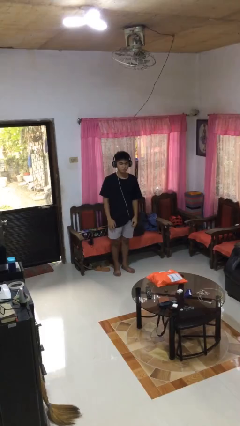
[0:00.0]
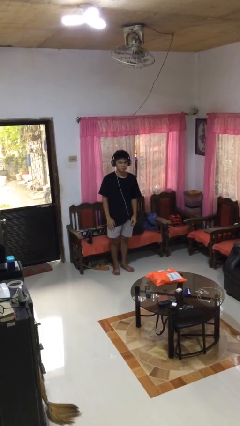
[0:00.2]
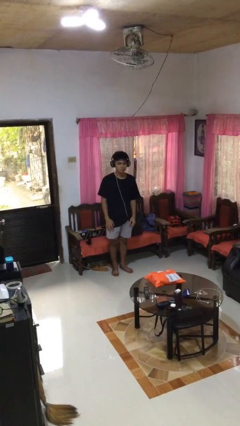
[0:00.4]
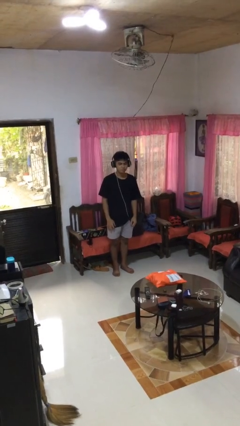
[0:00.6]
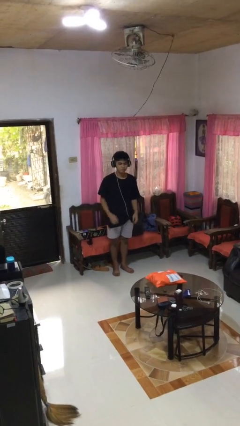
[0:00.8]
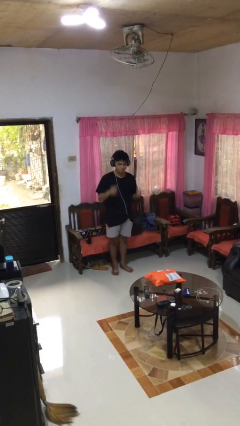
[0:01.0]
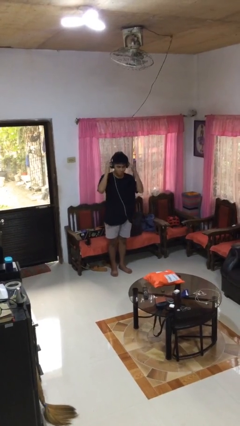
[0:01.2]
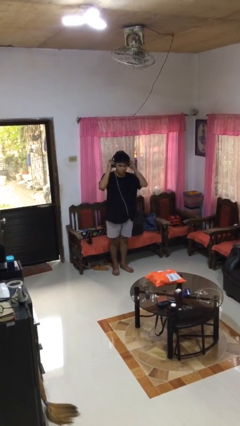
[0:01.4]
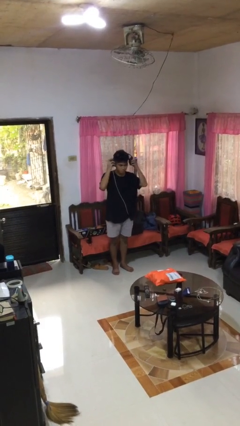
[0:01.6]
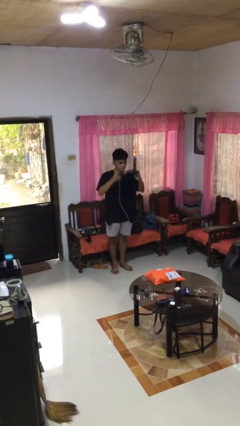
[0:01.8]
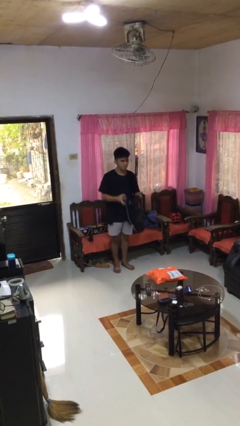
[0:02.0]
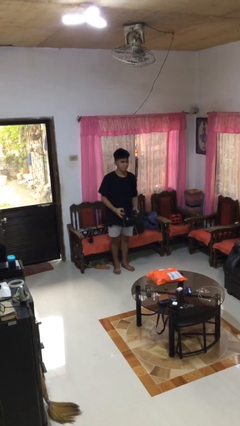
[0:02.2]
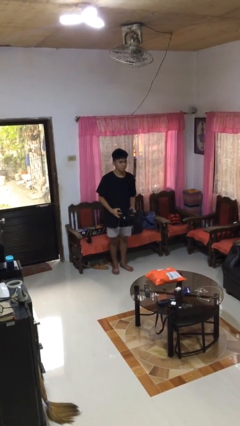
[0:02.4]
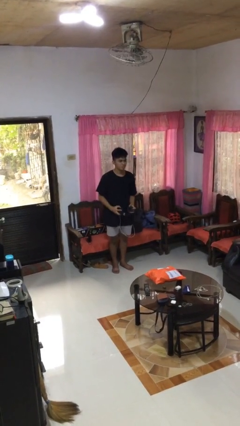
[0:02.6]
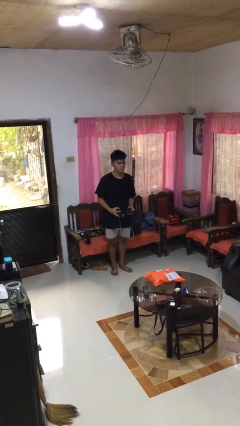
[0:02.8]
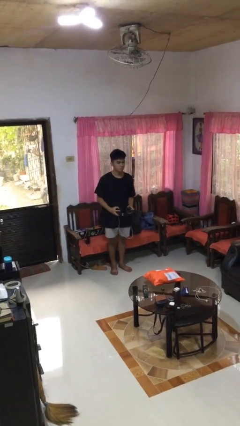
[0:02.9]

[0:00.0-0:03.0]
person takes off headphones

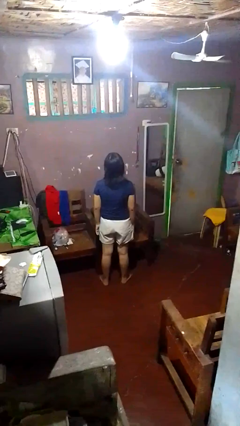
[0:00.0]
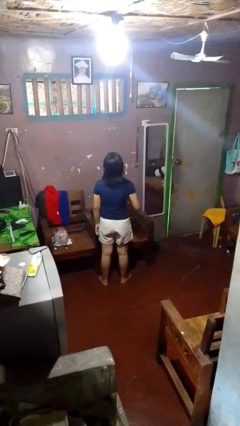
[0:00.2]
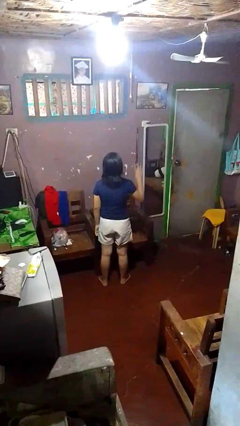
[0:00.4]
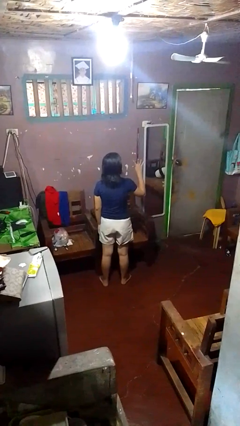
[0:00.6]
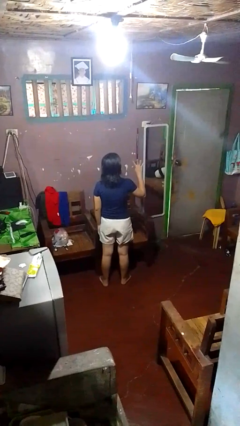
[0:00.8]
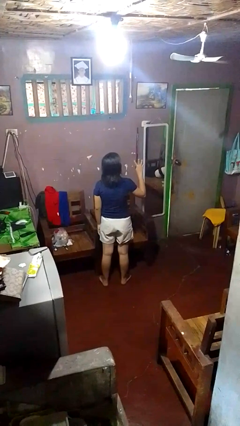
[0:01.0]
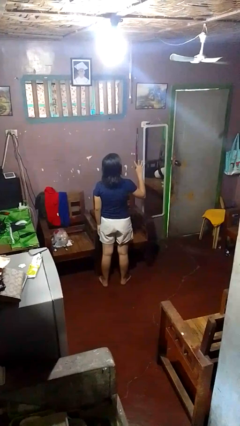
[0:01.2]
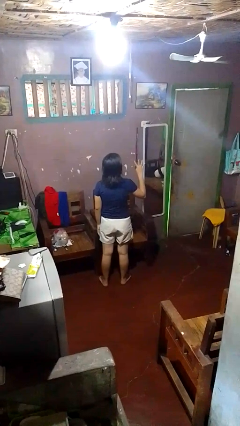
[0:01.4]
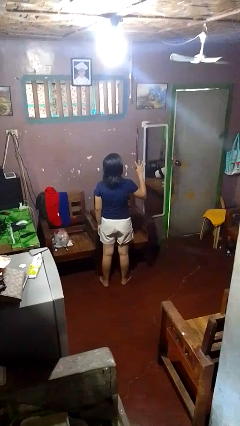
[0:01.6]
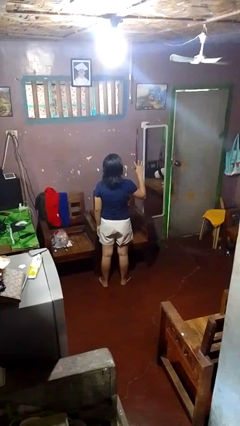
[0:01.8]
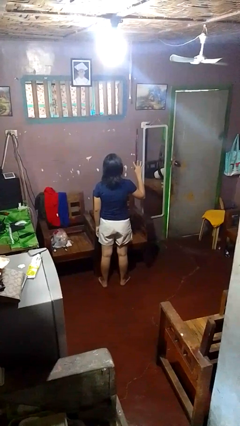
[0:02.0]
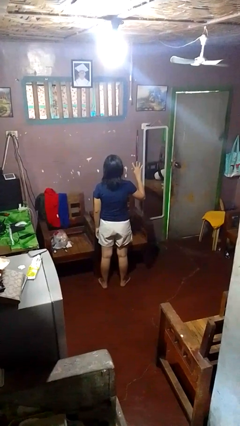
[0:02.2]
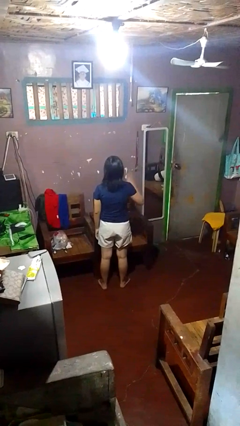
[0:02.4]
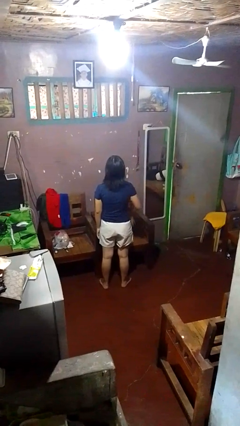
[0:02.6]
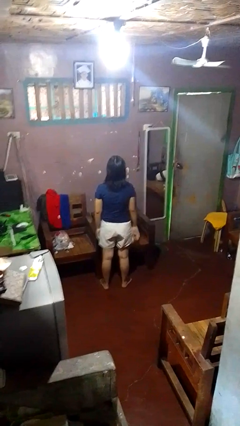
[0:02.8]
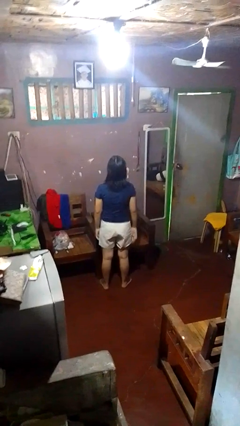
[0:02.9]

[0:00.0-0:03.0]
person gestures number four

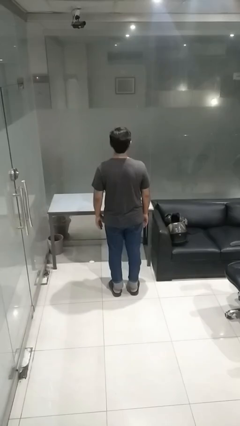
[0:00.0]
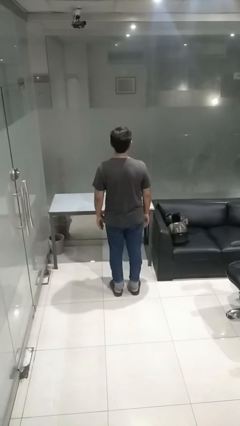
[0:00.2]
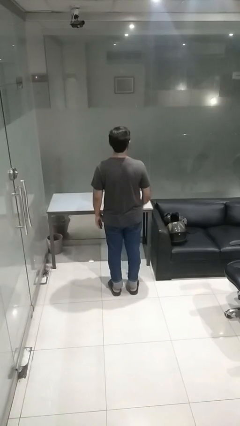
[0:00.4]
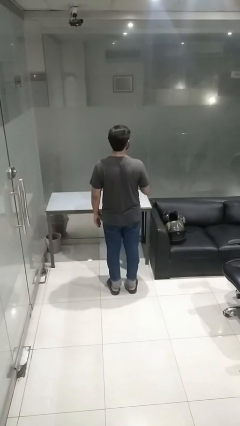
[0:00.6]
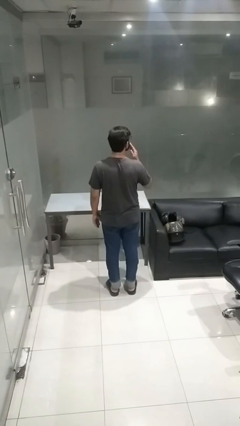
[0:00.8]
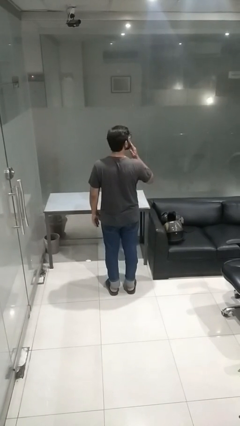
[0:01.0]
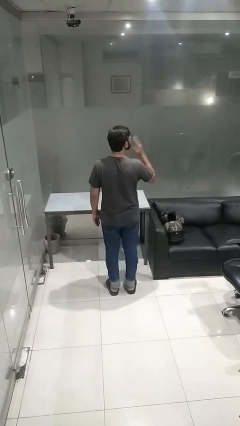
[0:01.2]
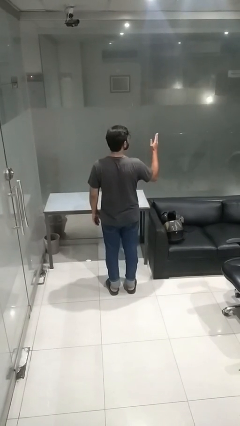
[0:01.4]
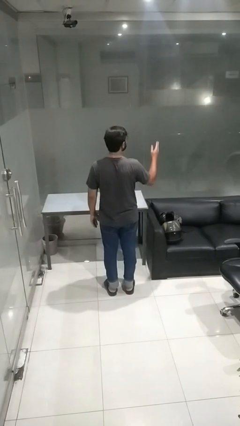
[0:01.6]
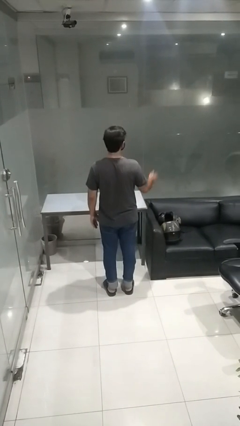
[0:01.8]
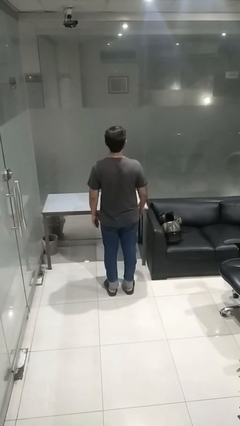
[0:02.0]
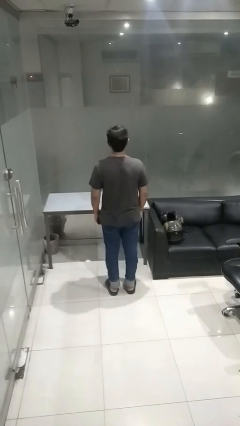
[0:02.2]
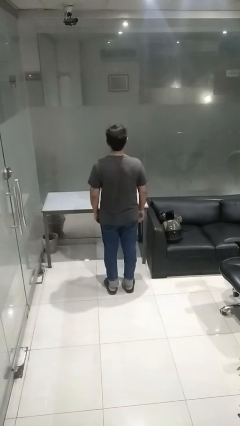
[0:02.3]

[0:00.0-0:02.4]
person gestures blow kiss

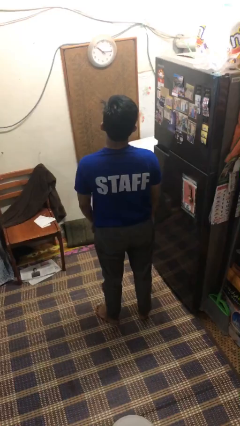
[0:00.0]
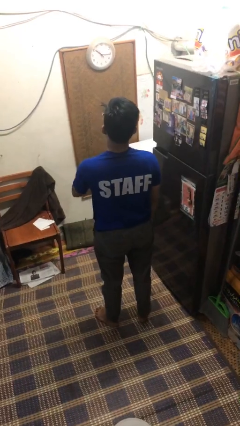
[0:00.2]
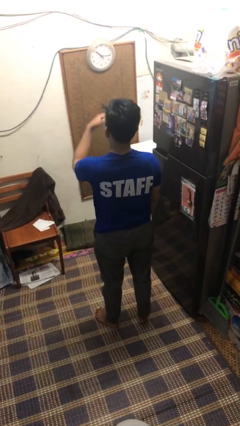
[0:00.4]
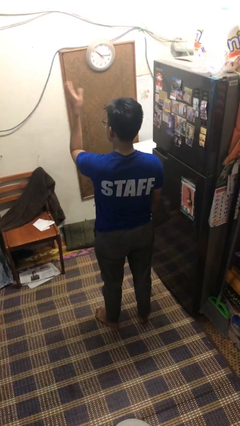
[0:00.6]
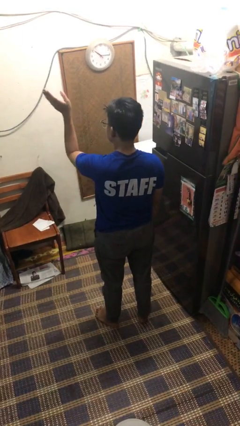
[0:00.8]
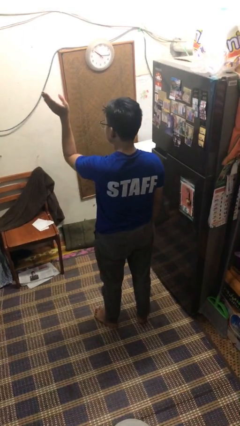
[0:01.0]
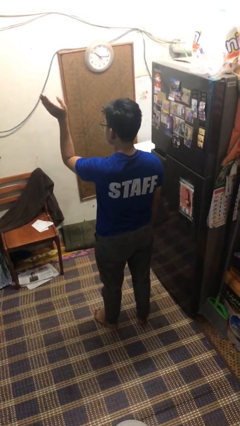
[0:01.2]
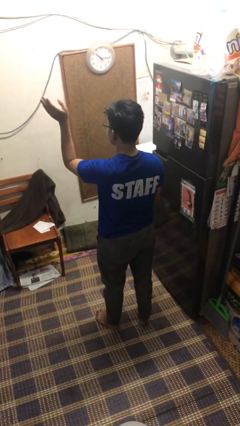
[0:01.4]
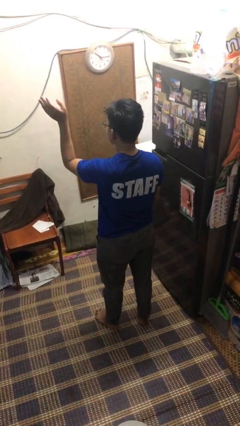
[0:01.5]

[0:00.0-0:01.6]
person gestures swipe left

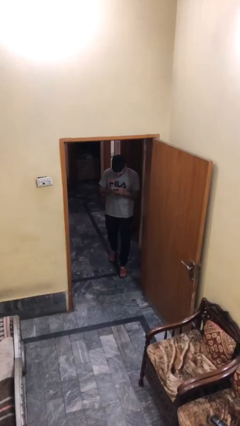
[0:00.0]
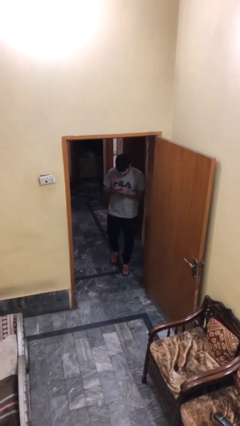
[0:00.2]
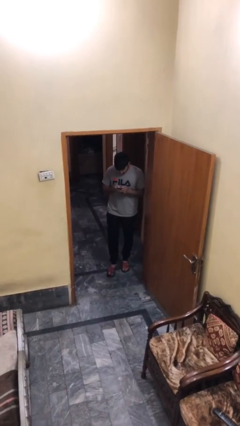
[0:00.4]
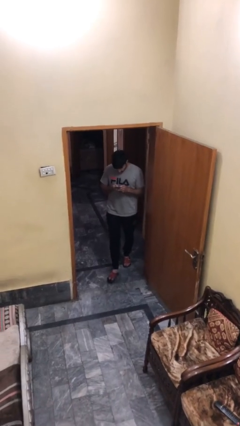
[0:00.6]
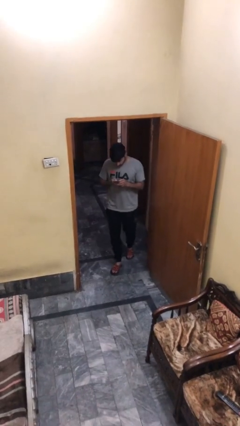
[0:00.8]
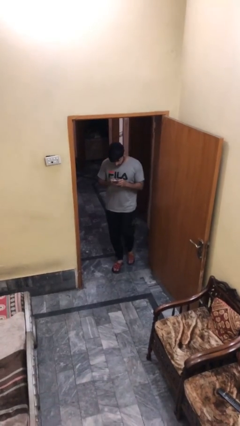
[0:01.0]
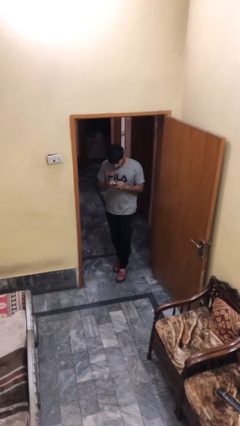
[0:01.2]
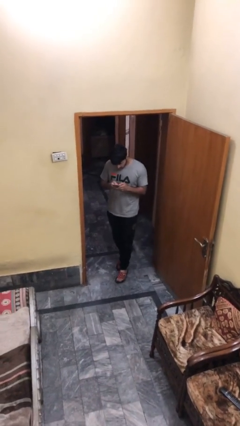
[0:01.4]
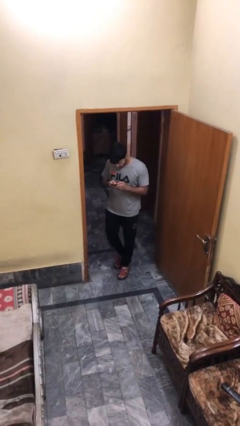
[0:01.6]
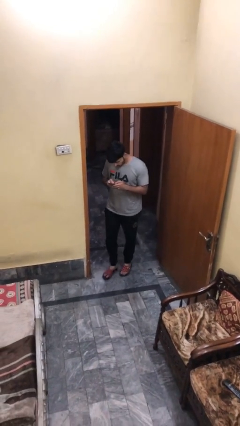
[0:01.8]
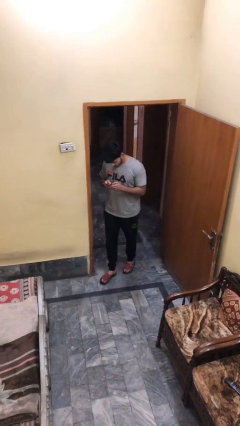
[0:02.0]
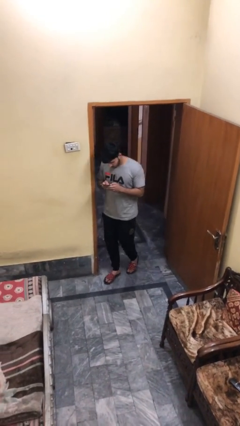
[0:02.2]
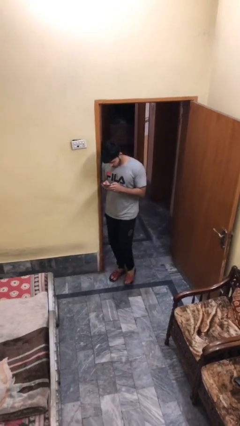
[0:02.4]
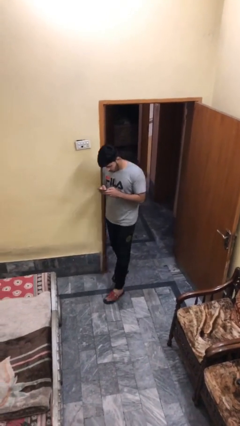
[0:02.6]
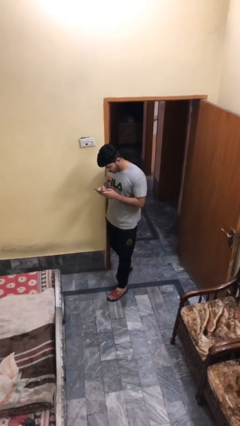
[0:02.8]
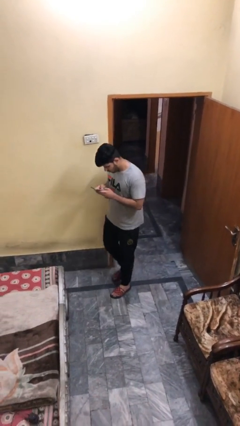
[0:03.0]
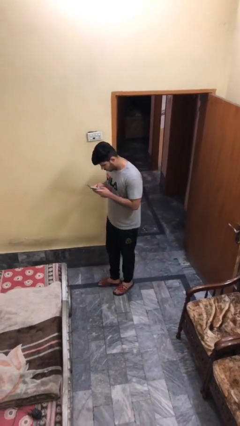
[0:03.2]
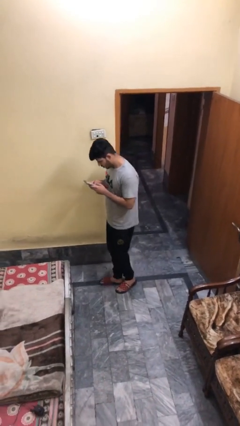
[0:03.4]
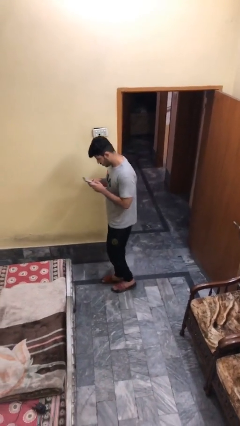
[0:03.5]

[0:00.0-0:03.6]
person enters scene through structure

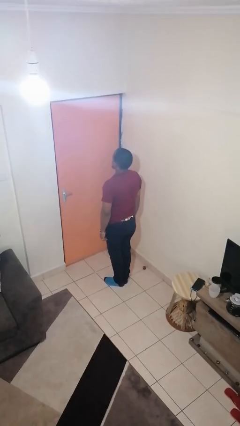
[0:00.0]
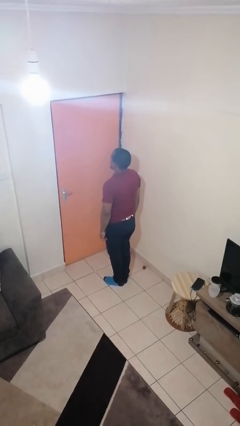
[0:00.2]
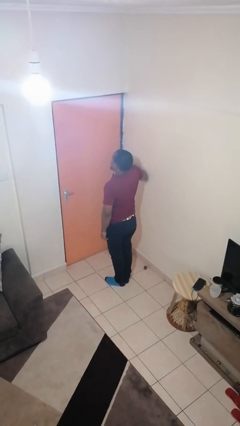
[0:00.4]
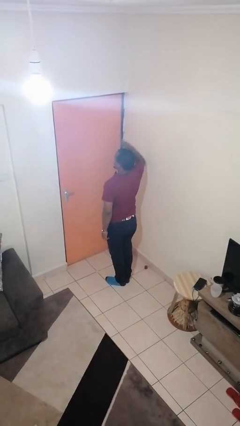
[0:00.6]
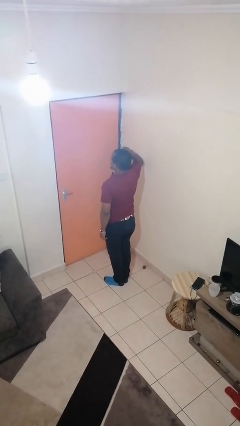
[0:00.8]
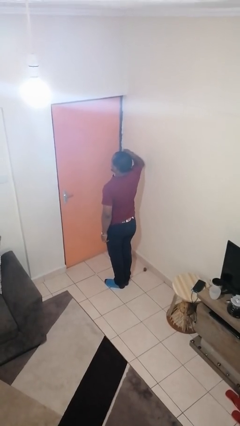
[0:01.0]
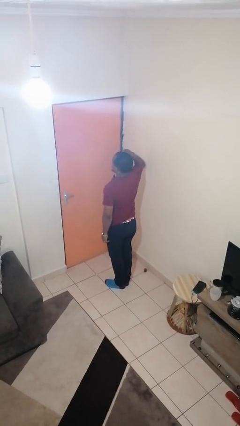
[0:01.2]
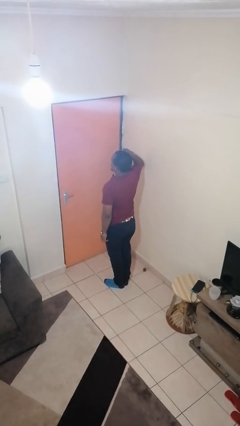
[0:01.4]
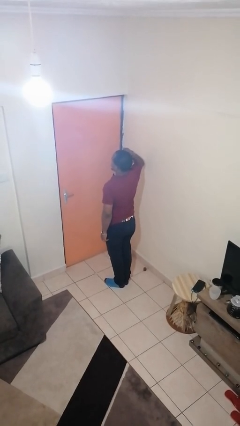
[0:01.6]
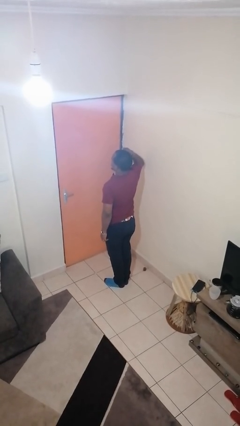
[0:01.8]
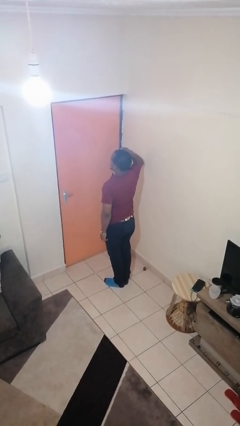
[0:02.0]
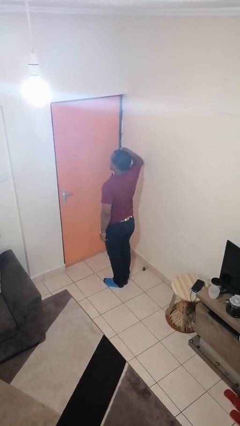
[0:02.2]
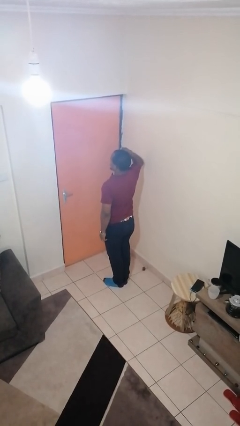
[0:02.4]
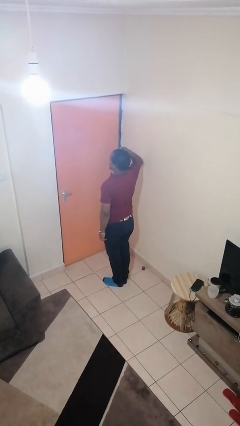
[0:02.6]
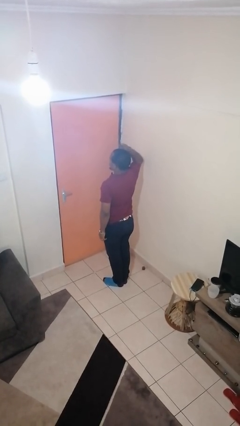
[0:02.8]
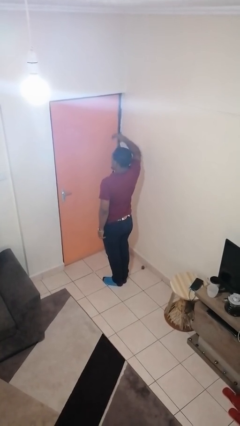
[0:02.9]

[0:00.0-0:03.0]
person salutes

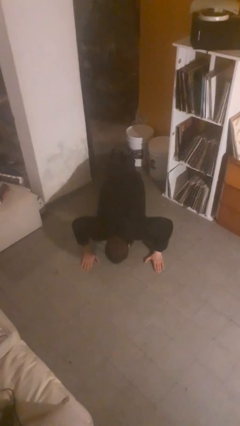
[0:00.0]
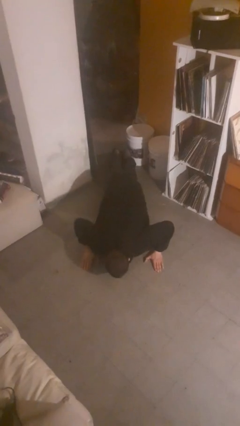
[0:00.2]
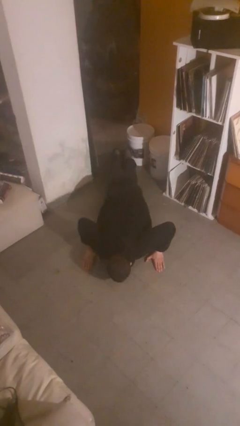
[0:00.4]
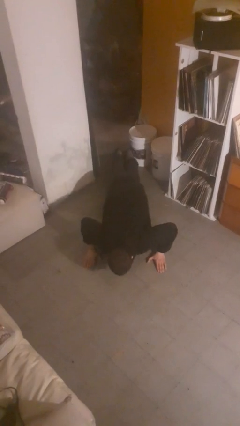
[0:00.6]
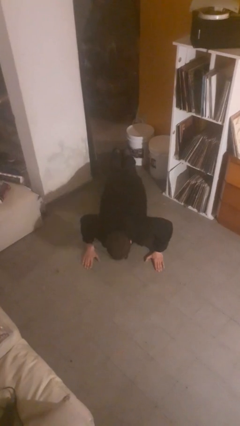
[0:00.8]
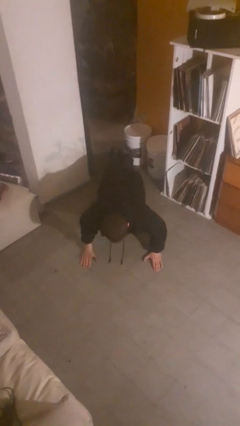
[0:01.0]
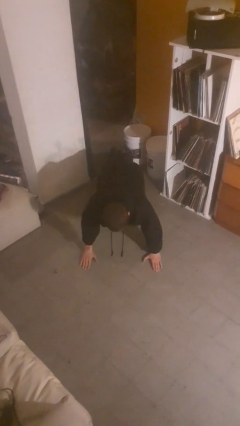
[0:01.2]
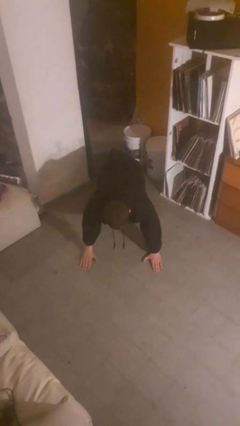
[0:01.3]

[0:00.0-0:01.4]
person exercises with pushup
